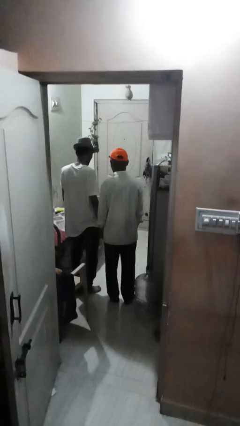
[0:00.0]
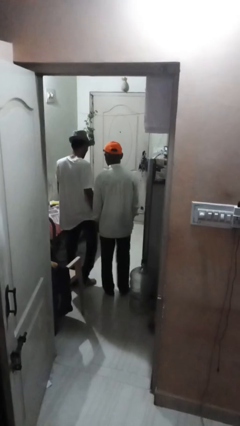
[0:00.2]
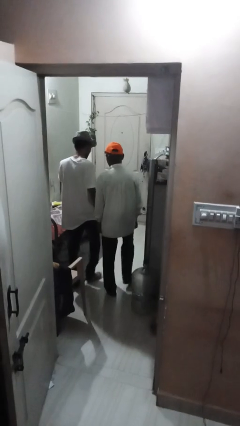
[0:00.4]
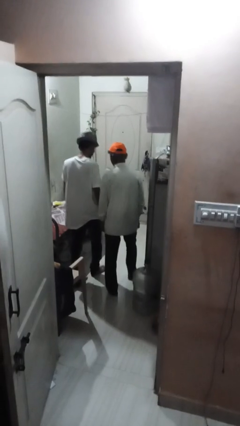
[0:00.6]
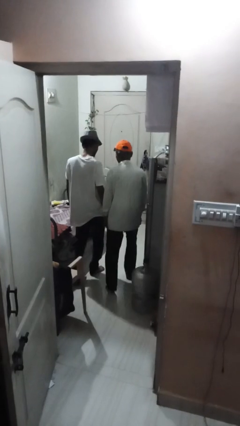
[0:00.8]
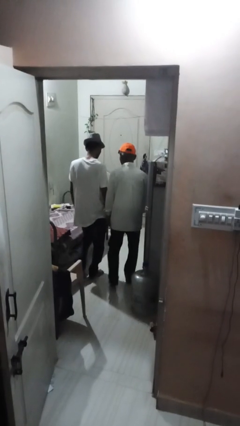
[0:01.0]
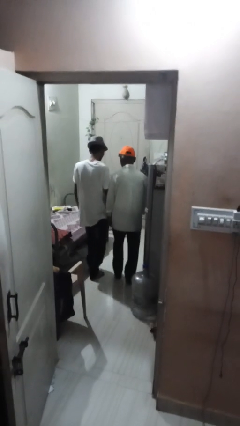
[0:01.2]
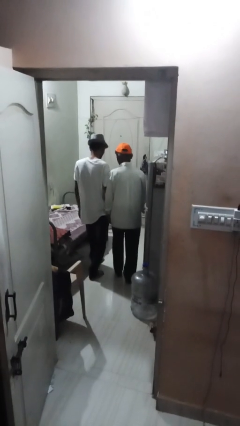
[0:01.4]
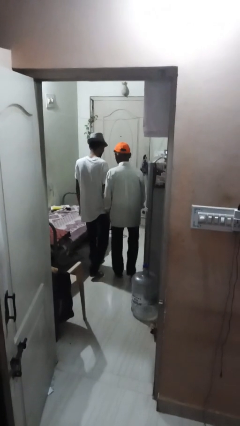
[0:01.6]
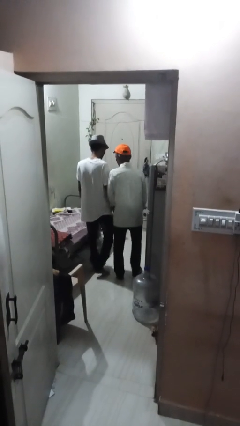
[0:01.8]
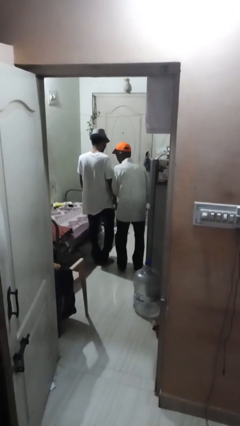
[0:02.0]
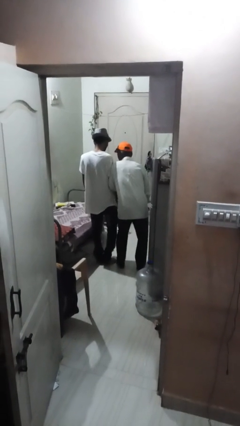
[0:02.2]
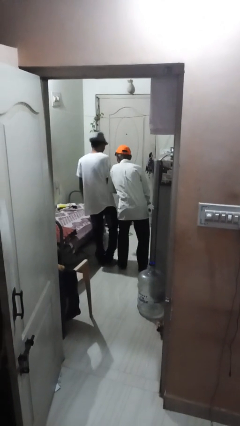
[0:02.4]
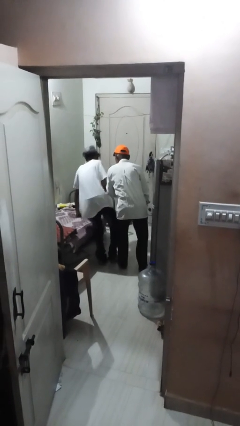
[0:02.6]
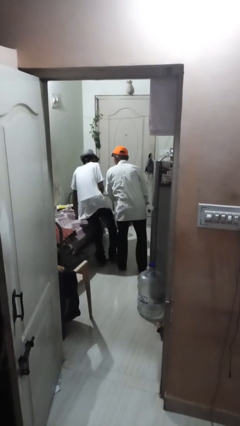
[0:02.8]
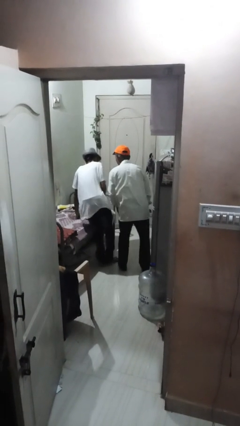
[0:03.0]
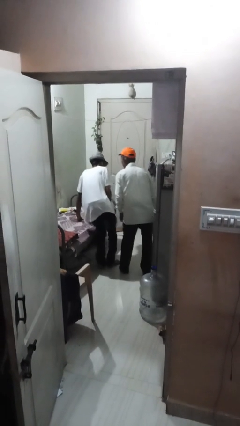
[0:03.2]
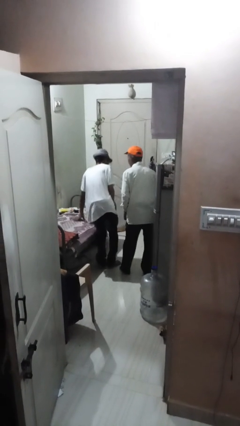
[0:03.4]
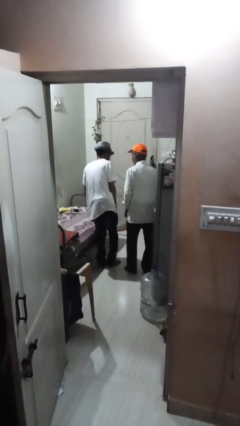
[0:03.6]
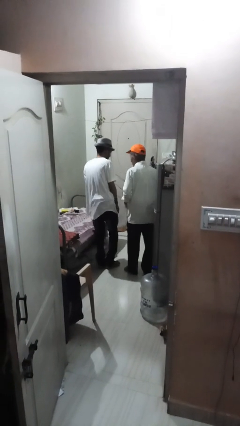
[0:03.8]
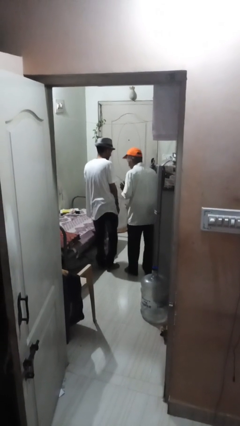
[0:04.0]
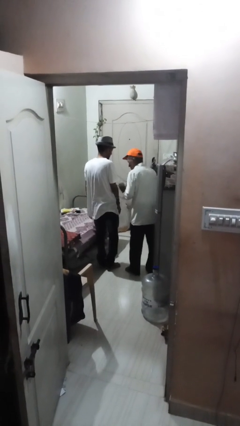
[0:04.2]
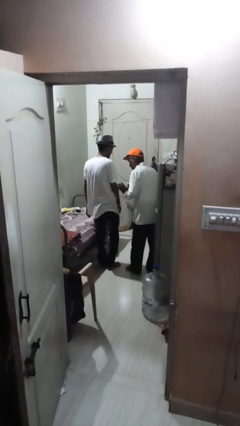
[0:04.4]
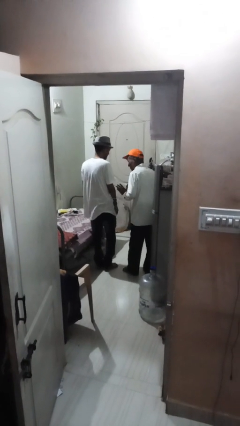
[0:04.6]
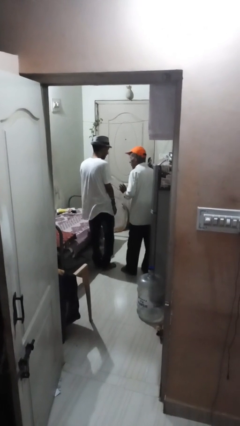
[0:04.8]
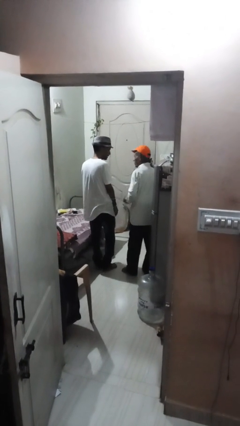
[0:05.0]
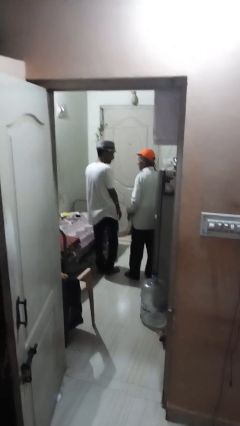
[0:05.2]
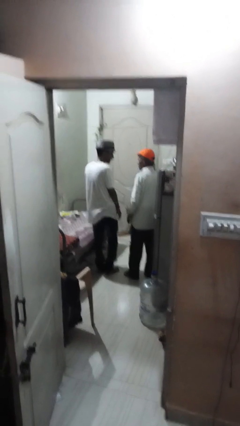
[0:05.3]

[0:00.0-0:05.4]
person bumps into person

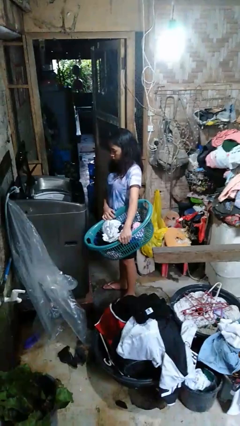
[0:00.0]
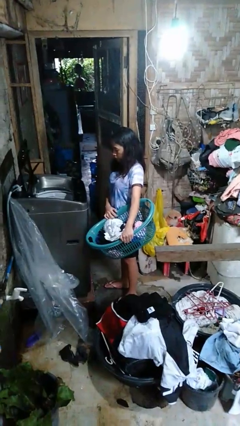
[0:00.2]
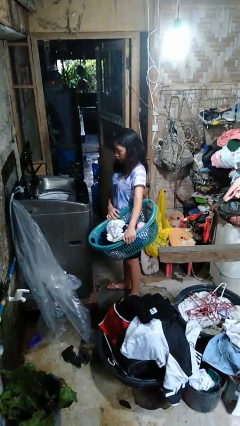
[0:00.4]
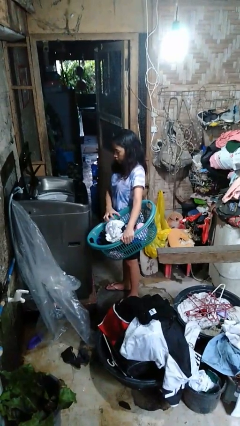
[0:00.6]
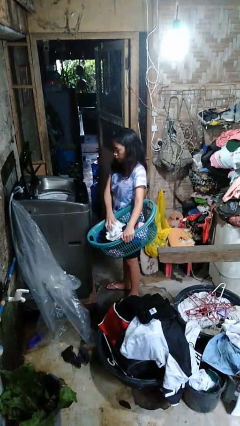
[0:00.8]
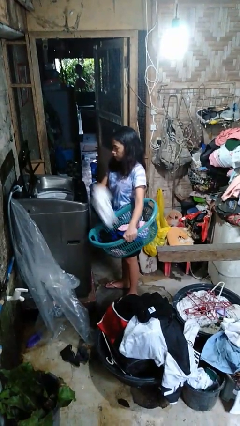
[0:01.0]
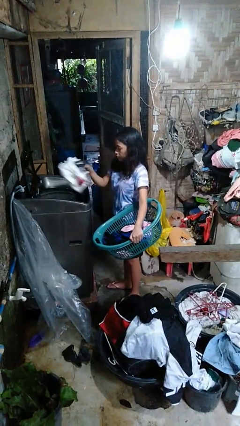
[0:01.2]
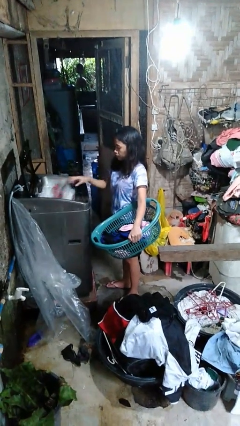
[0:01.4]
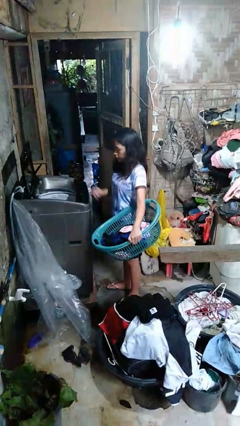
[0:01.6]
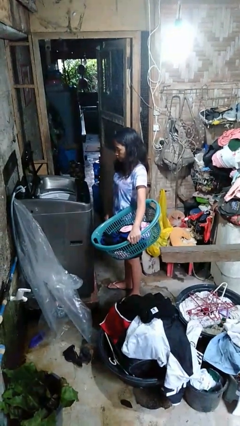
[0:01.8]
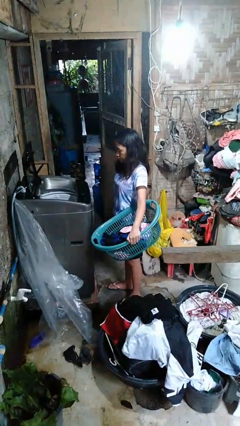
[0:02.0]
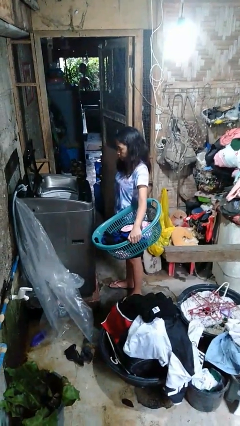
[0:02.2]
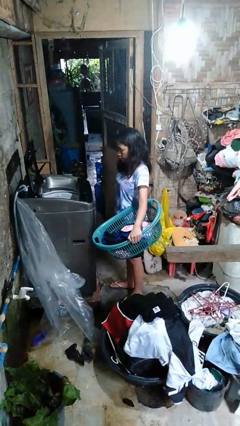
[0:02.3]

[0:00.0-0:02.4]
person loads clotheswasher

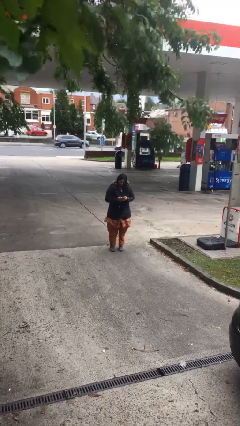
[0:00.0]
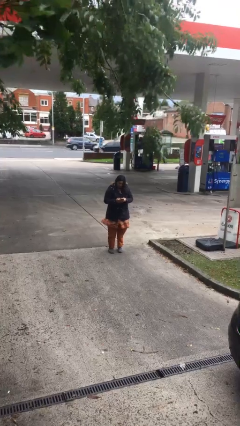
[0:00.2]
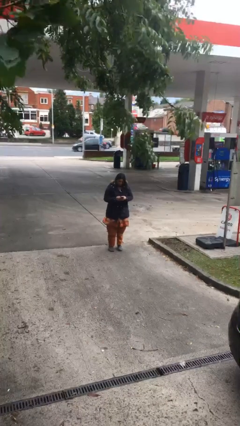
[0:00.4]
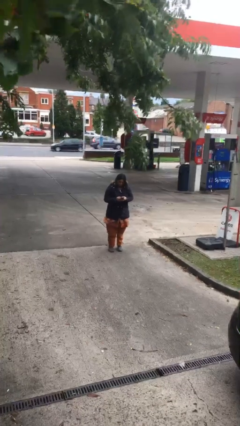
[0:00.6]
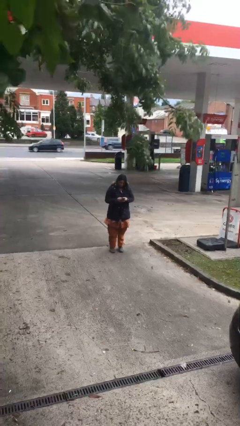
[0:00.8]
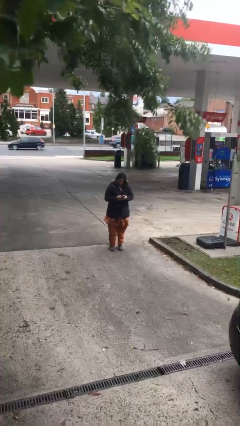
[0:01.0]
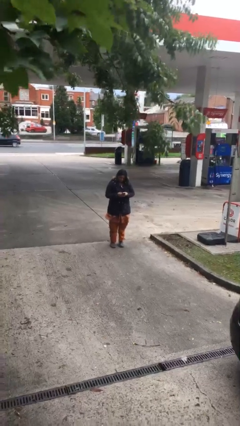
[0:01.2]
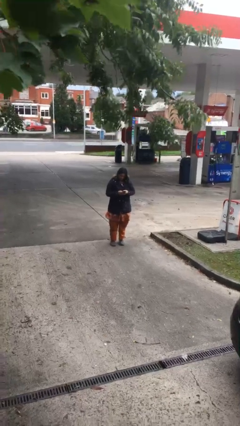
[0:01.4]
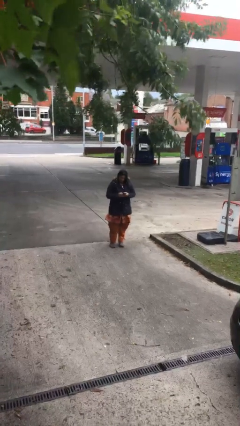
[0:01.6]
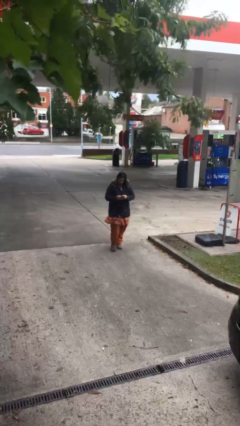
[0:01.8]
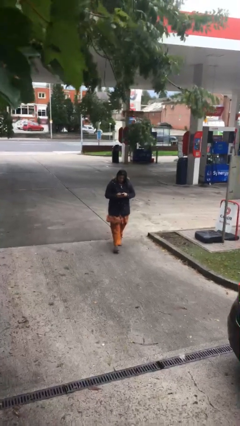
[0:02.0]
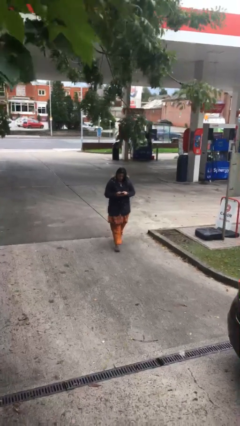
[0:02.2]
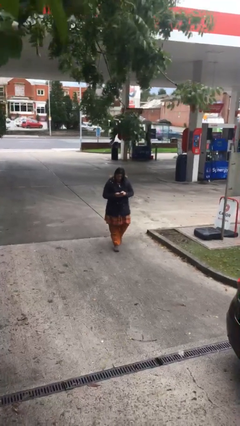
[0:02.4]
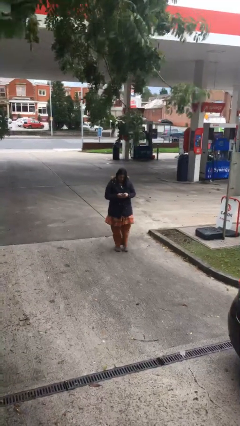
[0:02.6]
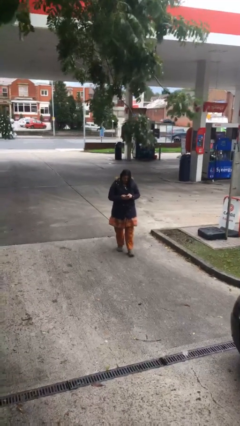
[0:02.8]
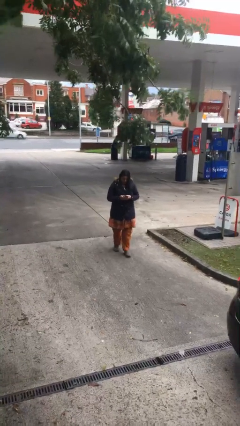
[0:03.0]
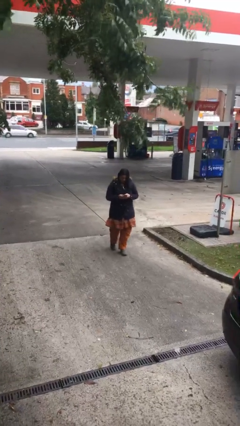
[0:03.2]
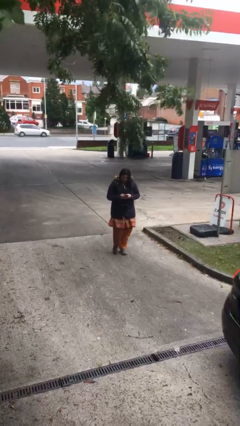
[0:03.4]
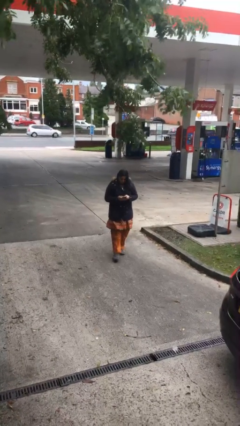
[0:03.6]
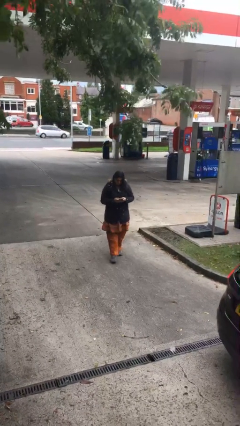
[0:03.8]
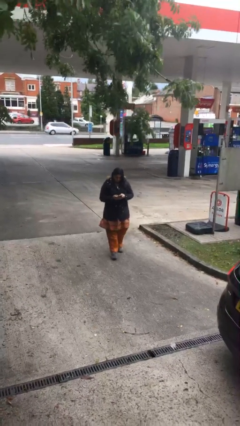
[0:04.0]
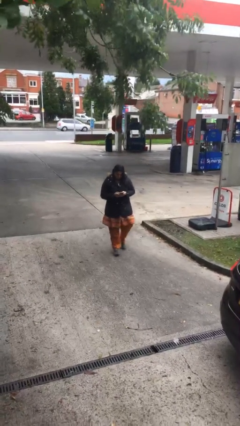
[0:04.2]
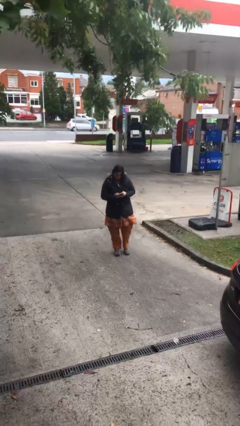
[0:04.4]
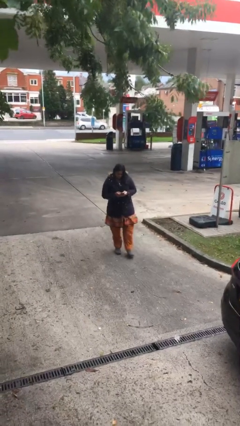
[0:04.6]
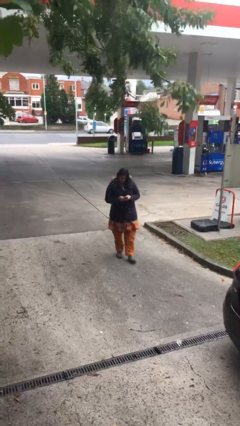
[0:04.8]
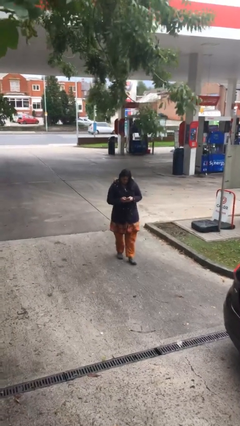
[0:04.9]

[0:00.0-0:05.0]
person texts on phone

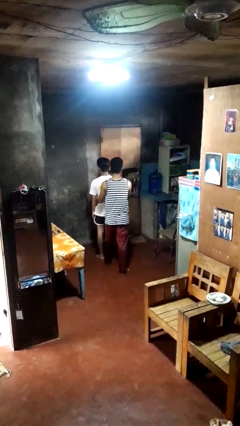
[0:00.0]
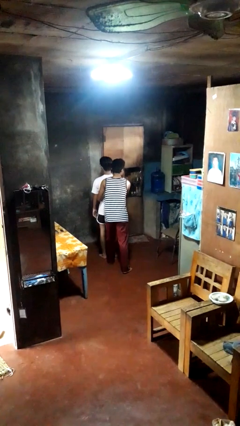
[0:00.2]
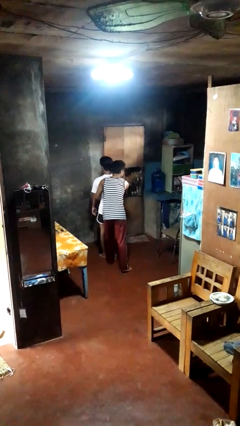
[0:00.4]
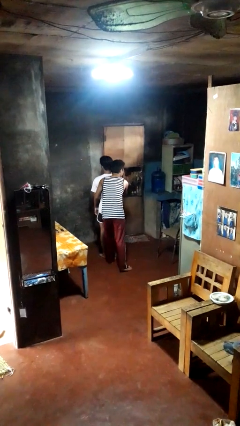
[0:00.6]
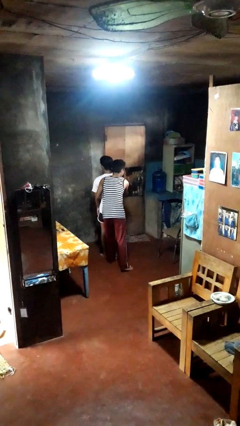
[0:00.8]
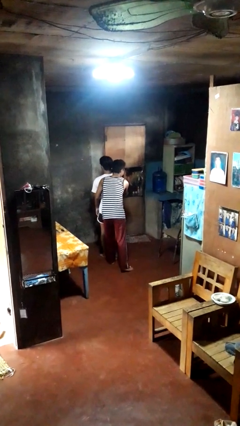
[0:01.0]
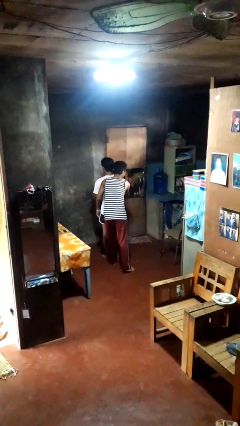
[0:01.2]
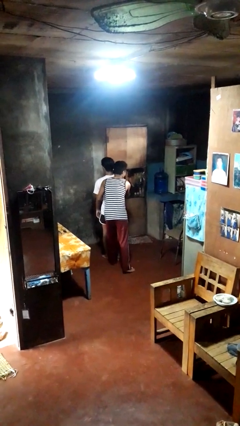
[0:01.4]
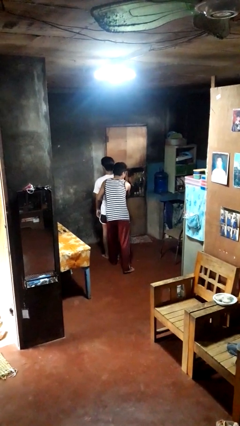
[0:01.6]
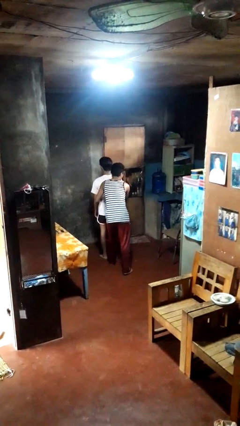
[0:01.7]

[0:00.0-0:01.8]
person hugs person from behind

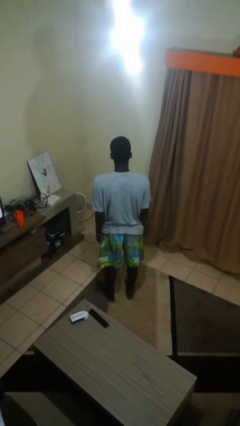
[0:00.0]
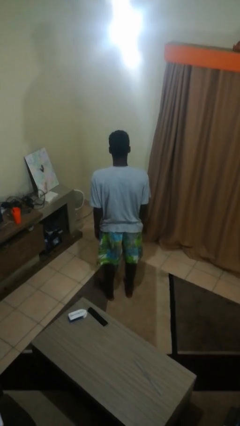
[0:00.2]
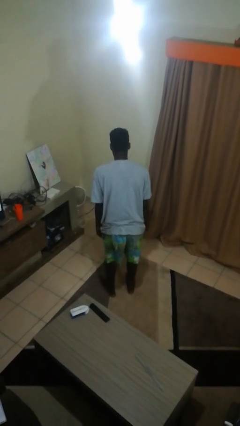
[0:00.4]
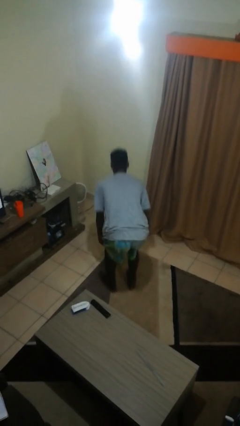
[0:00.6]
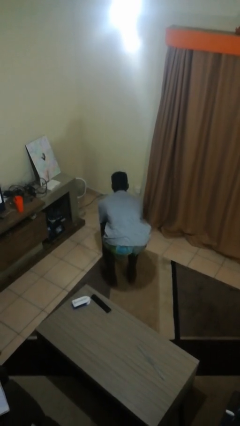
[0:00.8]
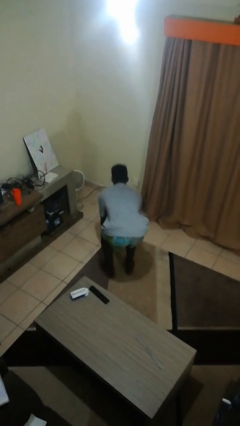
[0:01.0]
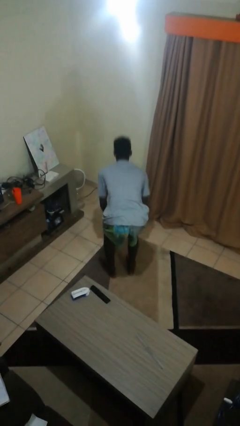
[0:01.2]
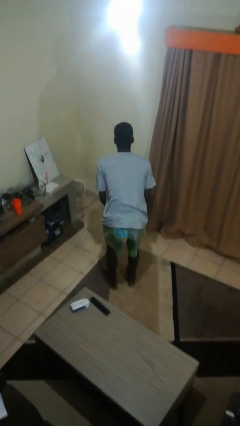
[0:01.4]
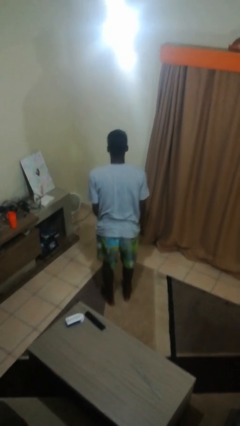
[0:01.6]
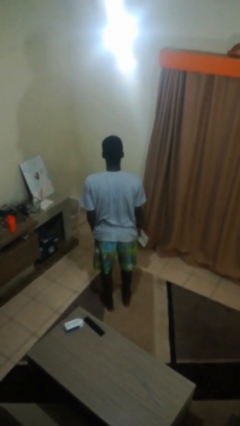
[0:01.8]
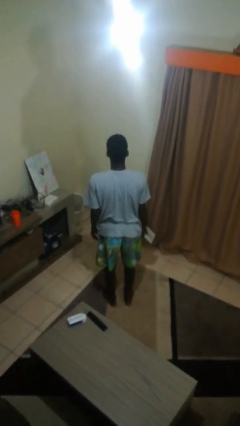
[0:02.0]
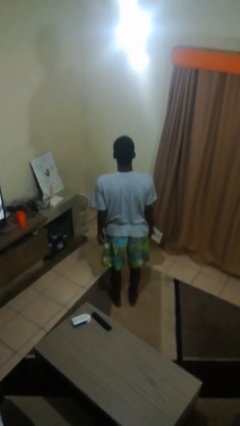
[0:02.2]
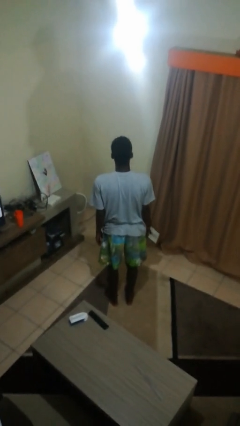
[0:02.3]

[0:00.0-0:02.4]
person picks up object from floor

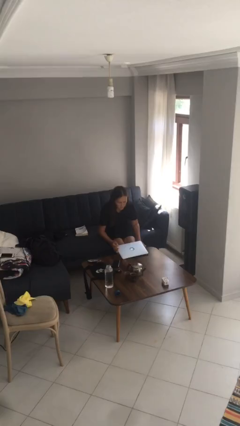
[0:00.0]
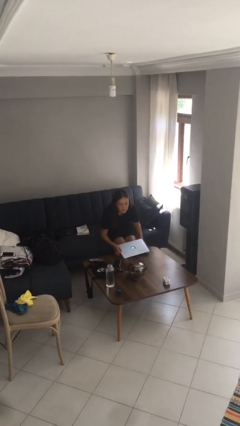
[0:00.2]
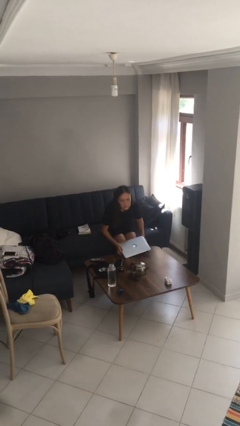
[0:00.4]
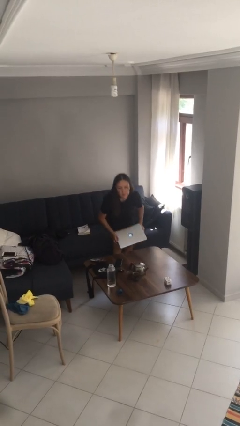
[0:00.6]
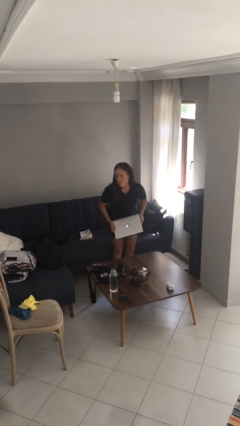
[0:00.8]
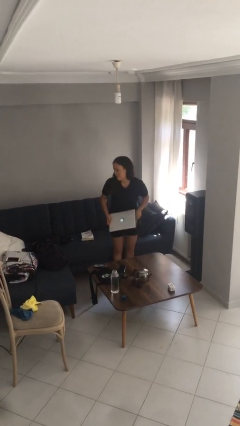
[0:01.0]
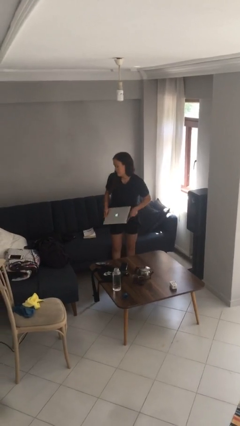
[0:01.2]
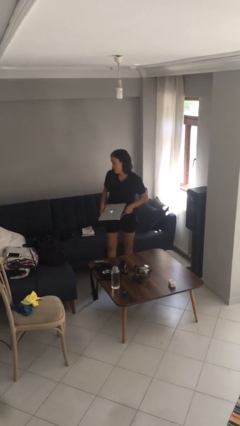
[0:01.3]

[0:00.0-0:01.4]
person stands up
